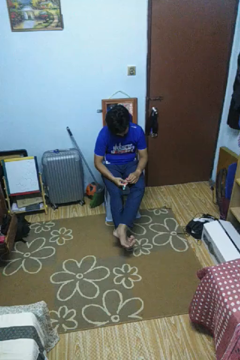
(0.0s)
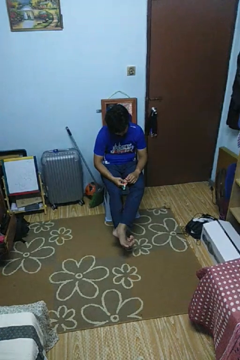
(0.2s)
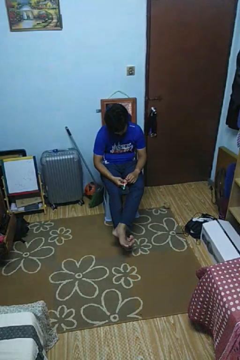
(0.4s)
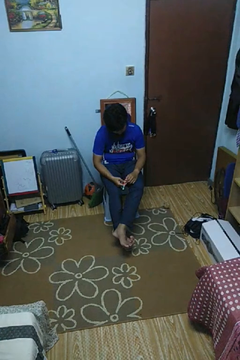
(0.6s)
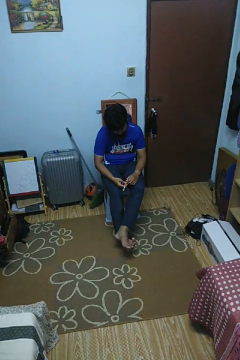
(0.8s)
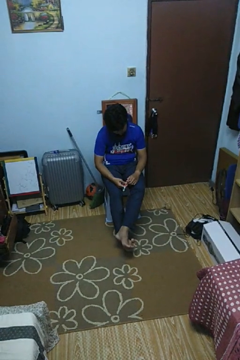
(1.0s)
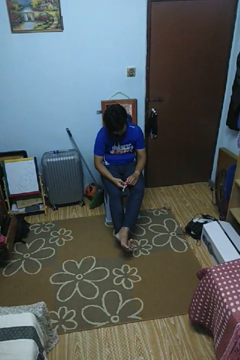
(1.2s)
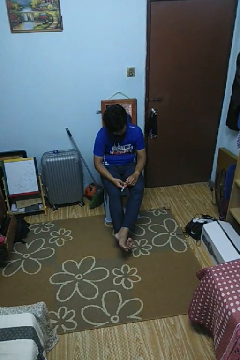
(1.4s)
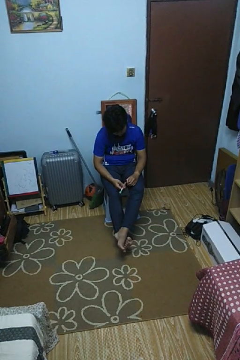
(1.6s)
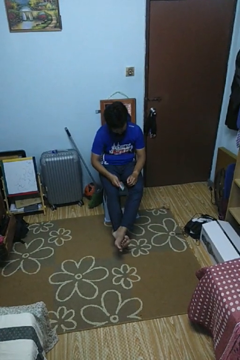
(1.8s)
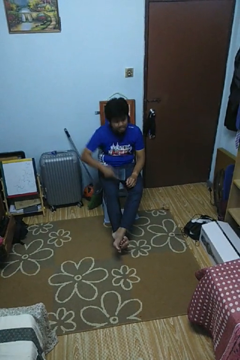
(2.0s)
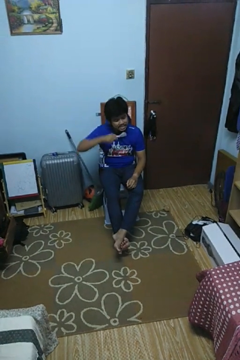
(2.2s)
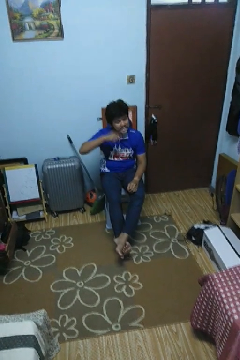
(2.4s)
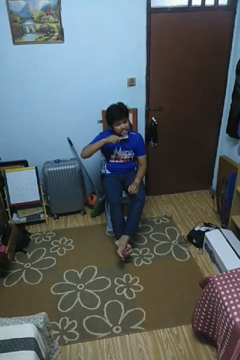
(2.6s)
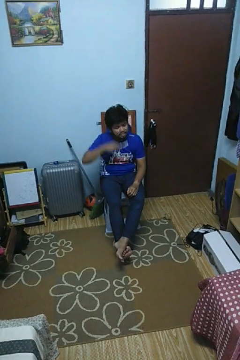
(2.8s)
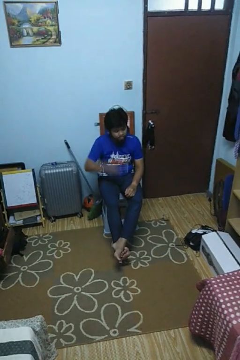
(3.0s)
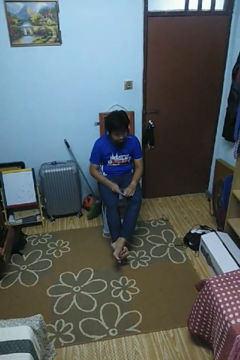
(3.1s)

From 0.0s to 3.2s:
person brushes teeth

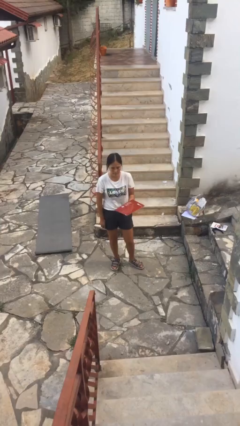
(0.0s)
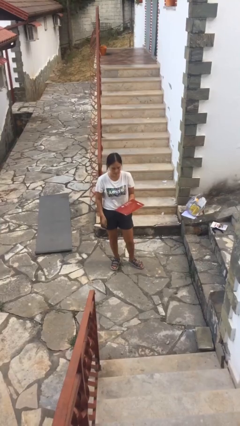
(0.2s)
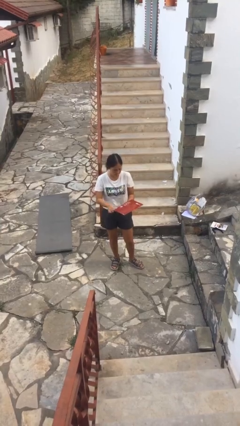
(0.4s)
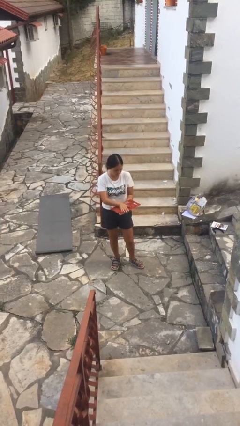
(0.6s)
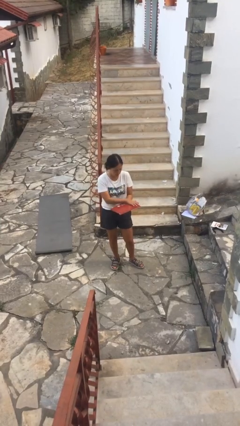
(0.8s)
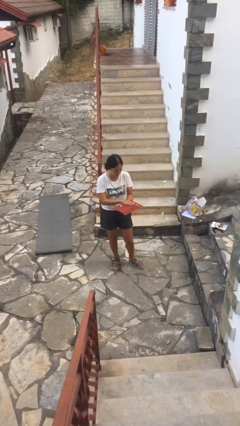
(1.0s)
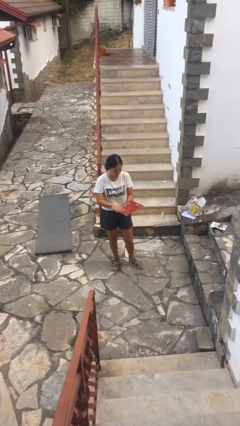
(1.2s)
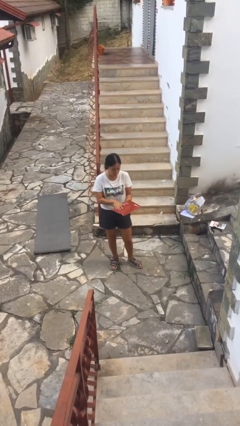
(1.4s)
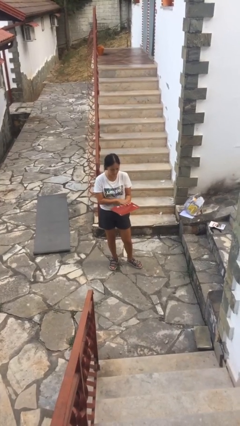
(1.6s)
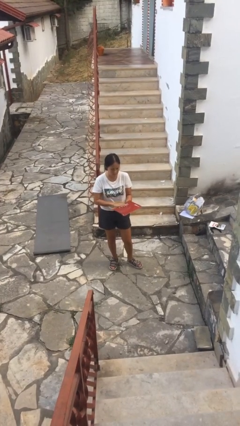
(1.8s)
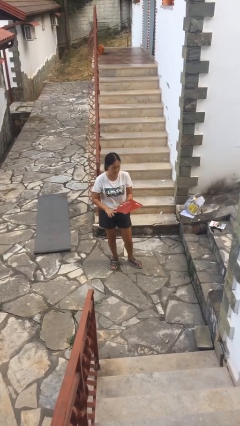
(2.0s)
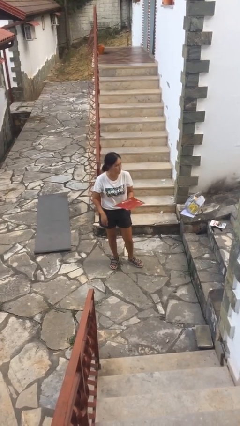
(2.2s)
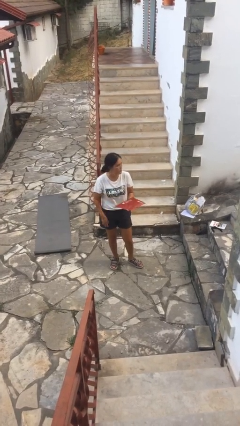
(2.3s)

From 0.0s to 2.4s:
person waves hand over object

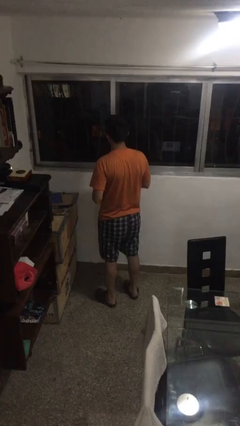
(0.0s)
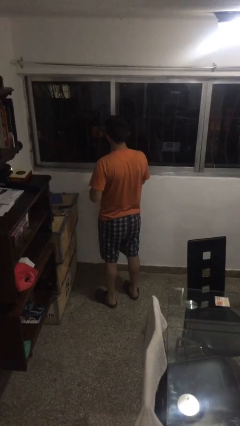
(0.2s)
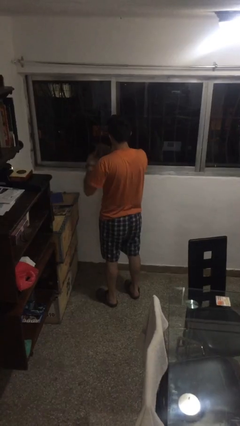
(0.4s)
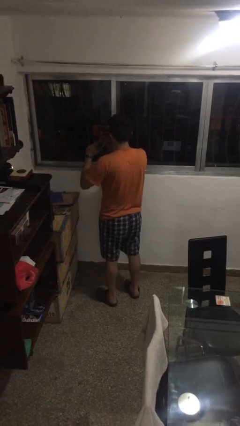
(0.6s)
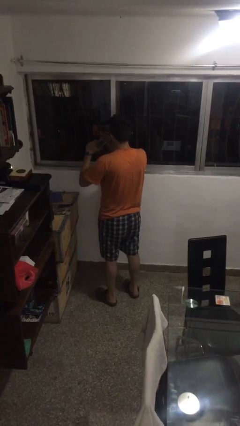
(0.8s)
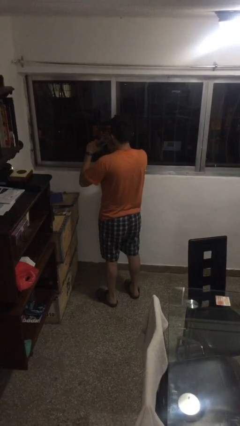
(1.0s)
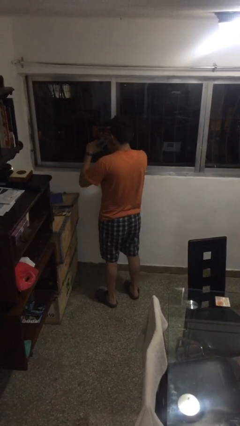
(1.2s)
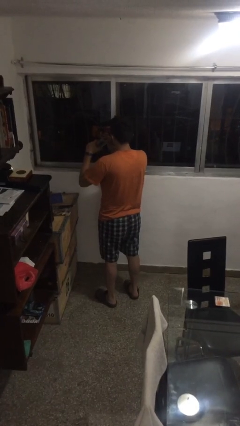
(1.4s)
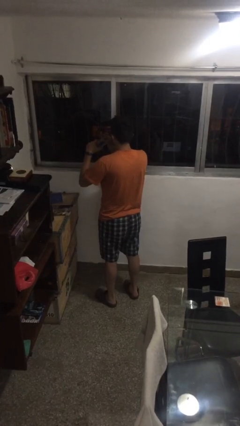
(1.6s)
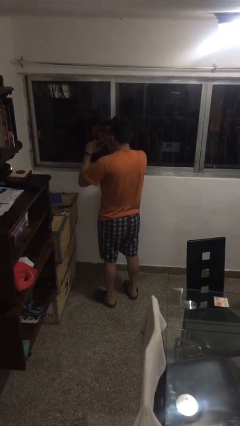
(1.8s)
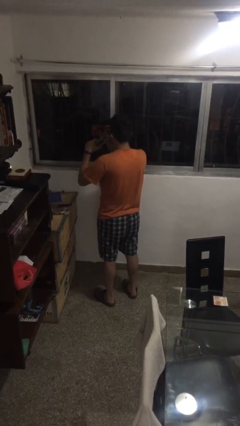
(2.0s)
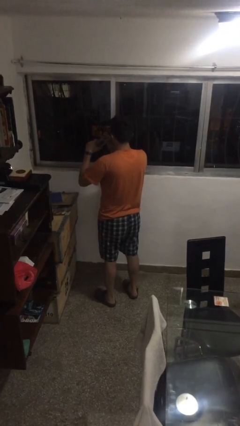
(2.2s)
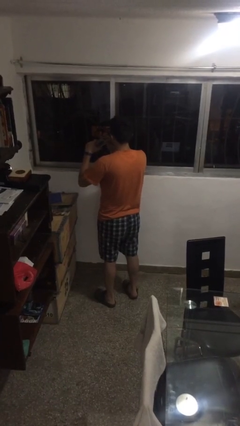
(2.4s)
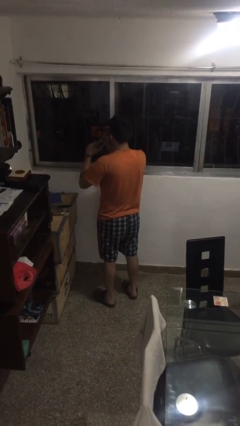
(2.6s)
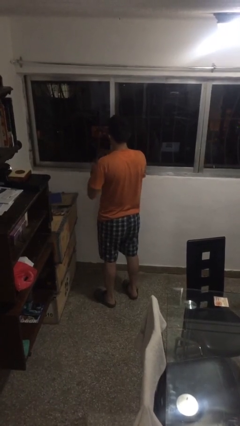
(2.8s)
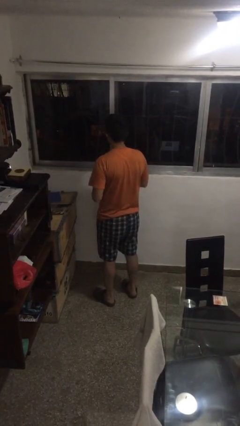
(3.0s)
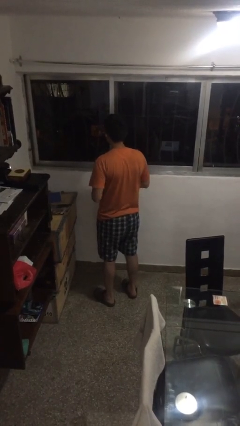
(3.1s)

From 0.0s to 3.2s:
person drinks from straw

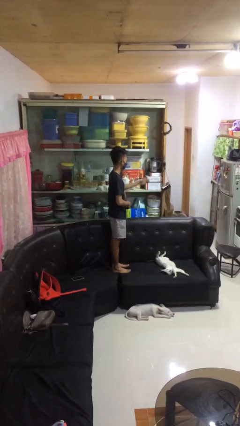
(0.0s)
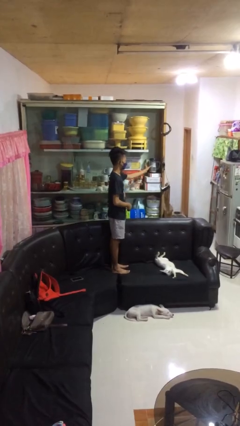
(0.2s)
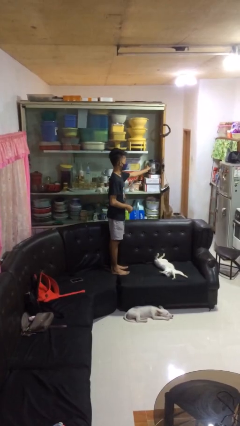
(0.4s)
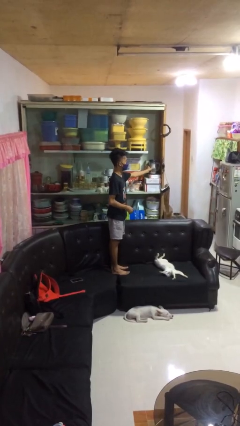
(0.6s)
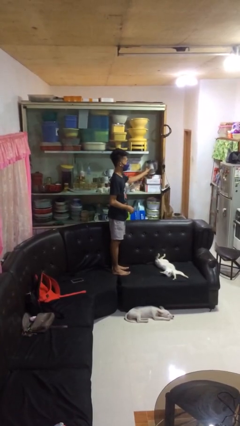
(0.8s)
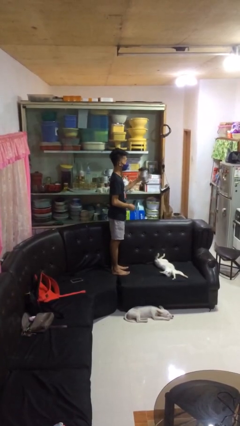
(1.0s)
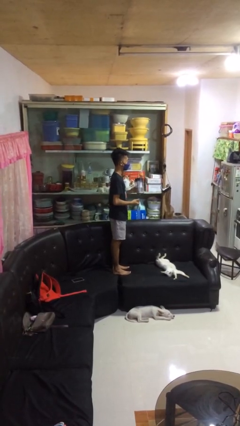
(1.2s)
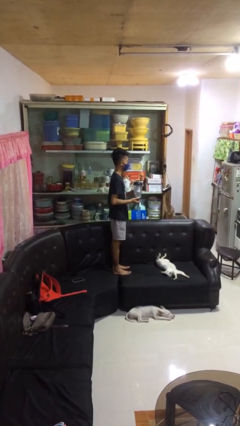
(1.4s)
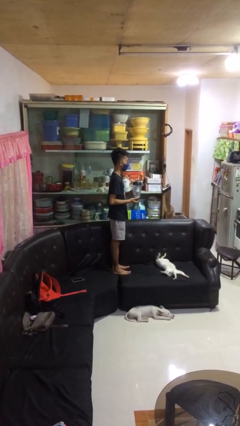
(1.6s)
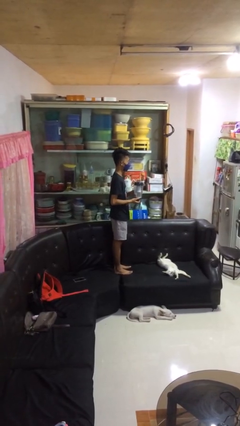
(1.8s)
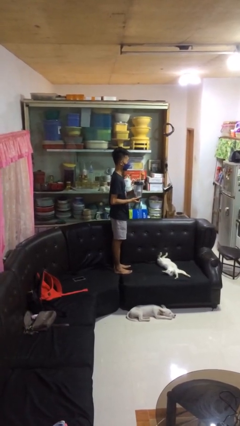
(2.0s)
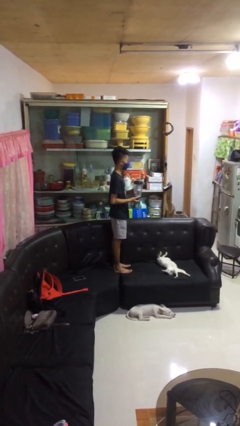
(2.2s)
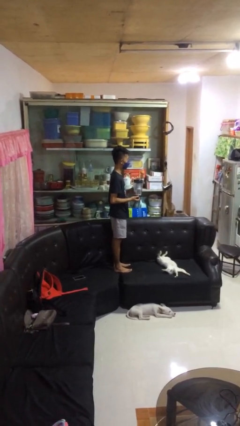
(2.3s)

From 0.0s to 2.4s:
person picks up object from cabinet

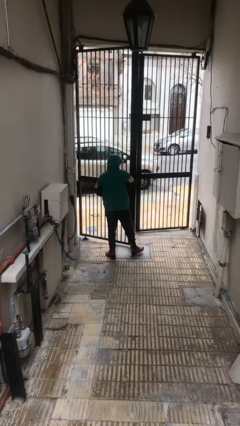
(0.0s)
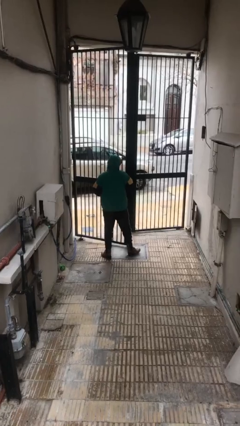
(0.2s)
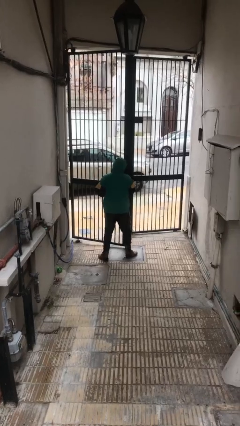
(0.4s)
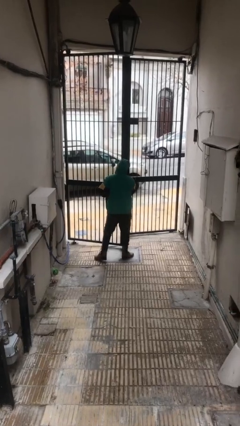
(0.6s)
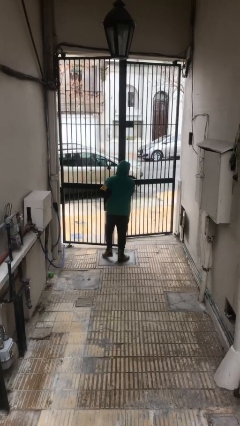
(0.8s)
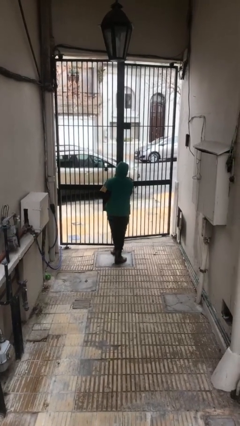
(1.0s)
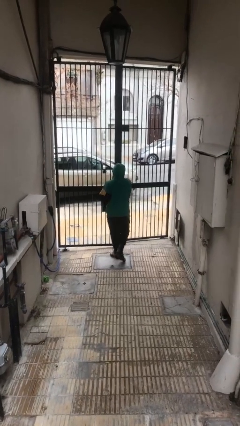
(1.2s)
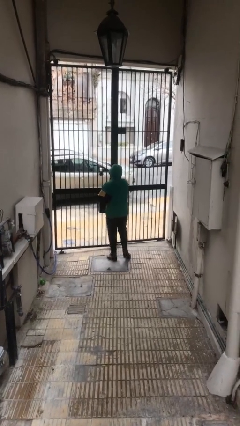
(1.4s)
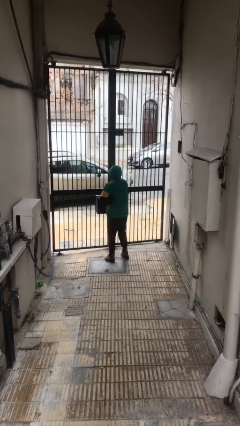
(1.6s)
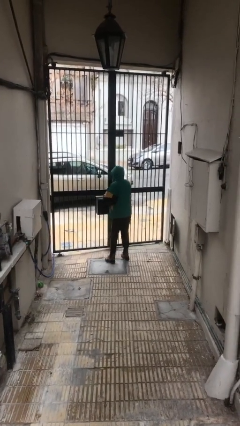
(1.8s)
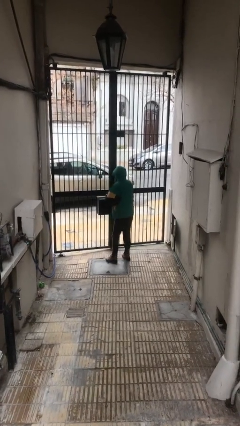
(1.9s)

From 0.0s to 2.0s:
person closes gate

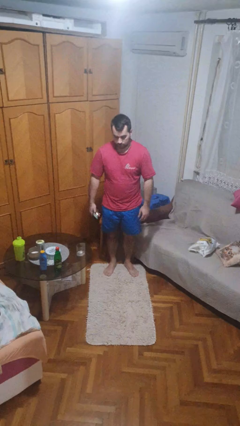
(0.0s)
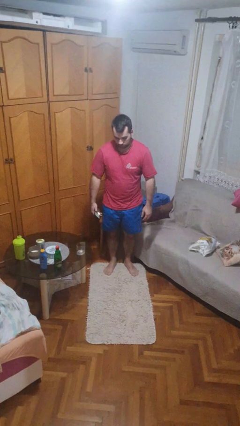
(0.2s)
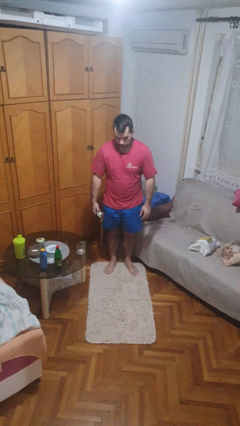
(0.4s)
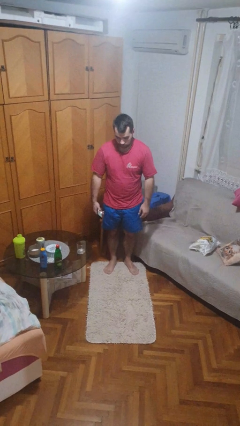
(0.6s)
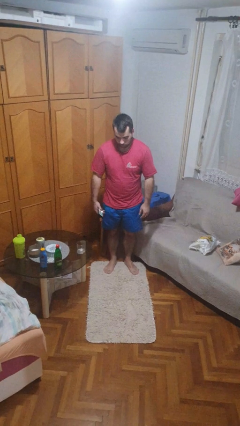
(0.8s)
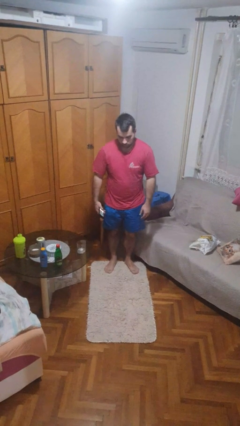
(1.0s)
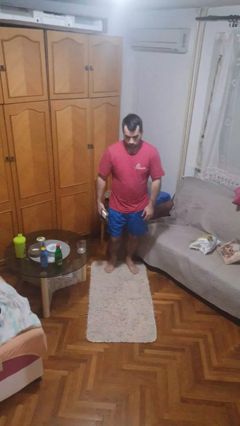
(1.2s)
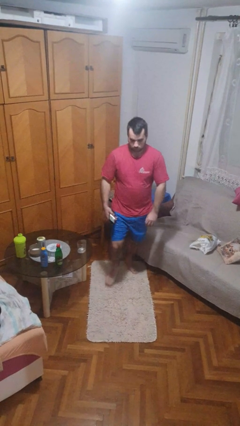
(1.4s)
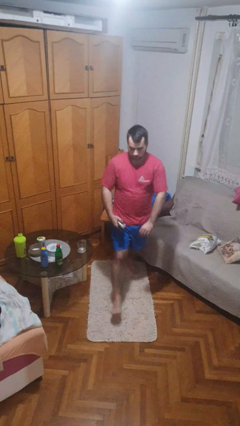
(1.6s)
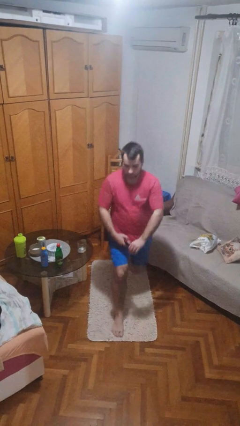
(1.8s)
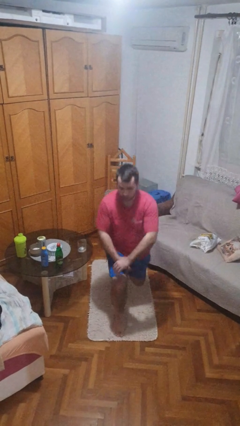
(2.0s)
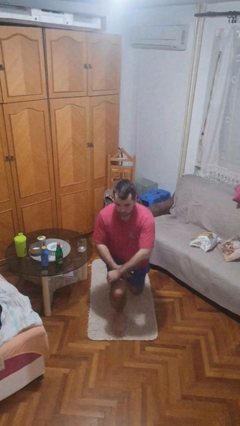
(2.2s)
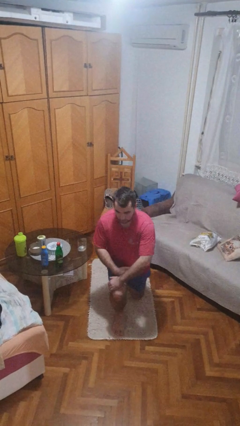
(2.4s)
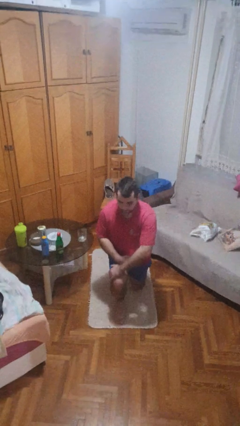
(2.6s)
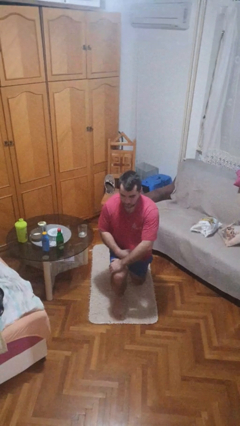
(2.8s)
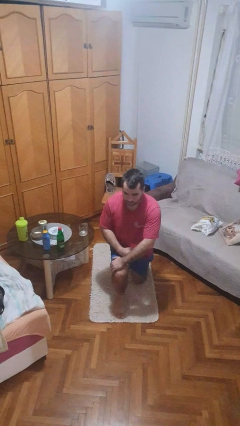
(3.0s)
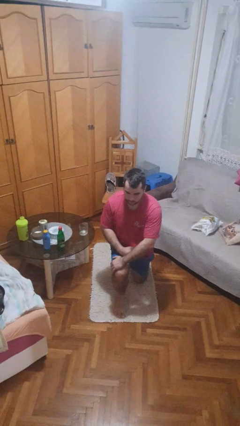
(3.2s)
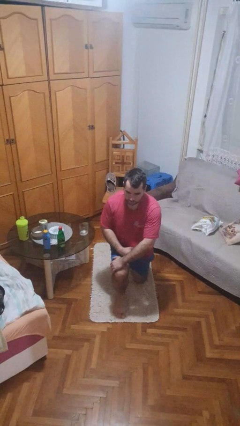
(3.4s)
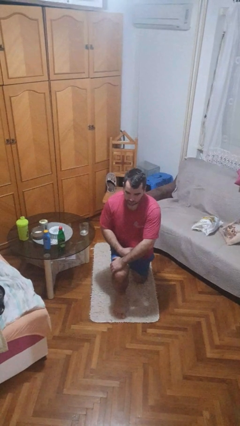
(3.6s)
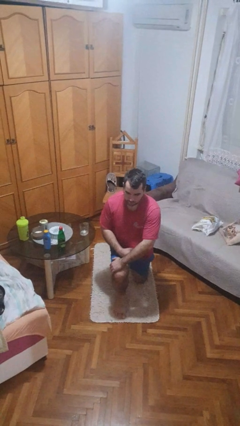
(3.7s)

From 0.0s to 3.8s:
person kneels

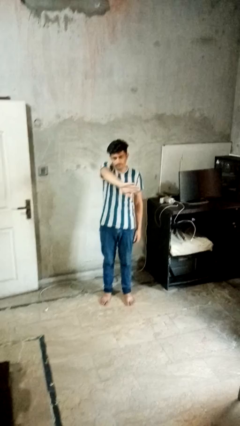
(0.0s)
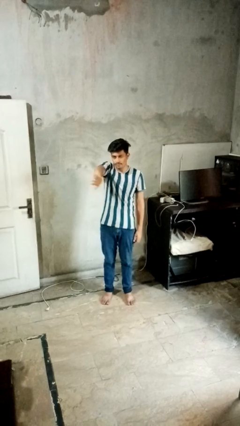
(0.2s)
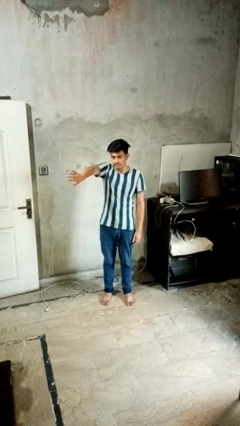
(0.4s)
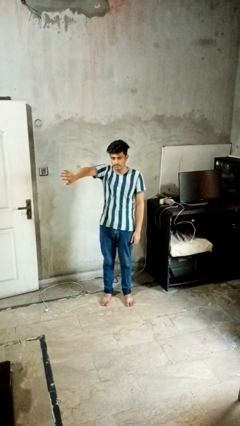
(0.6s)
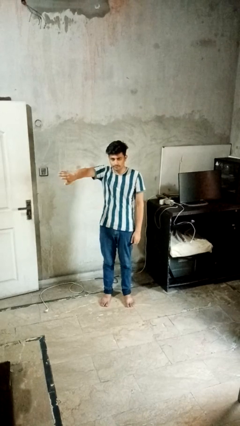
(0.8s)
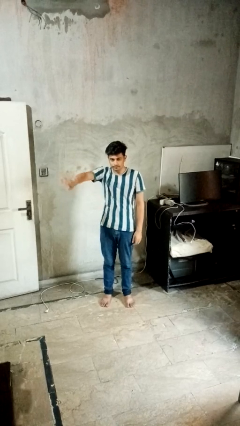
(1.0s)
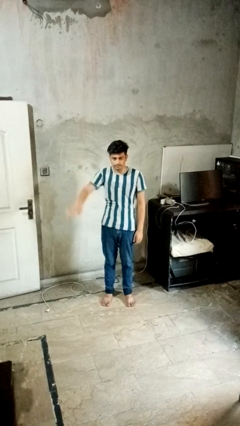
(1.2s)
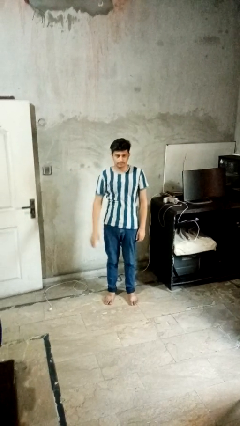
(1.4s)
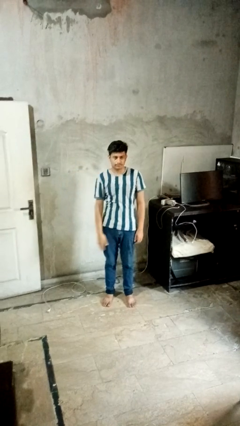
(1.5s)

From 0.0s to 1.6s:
person gestures swipe right
